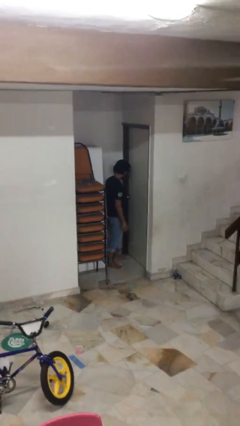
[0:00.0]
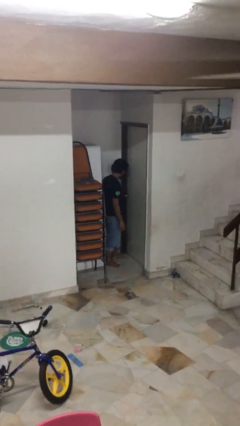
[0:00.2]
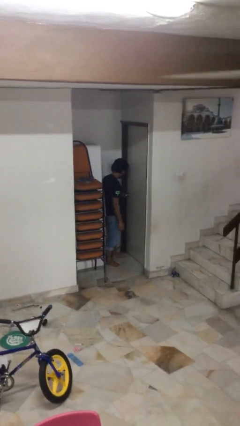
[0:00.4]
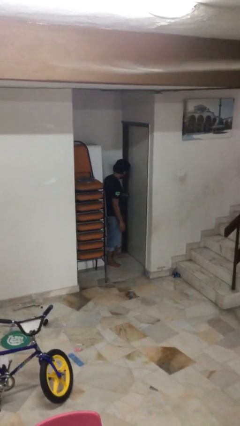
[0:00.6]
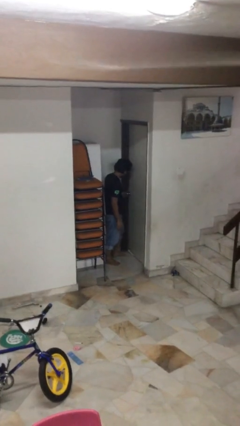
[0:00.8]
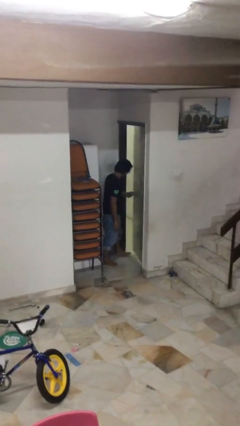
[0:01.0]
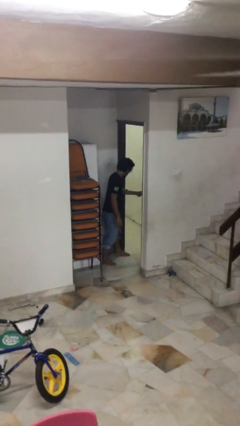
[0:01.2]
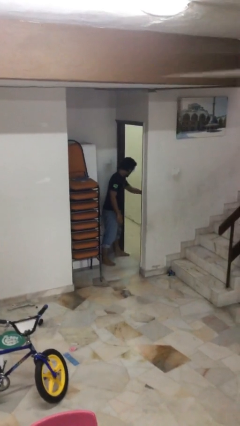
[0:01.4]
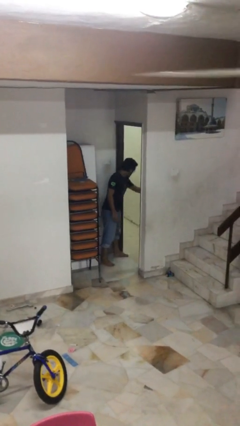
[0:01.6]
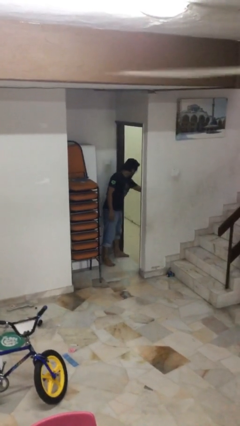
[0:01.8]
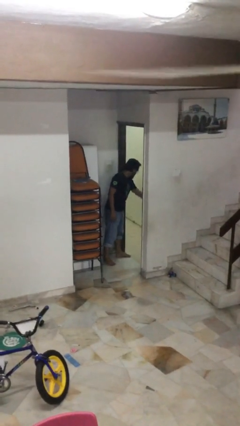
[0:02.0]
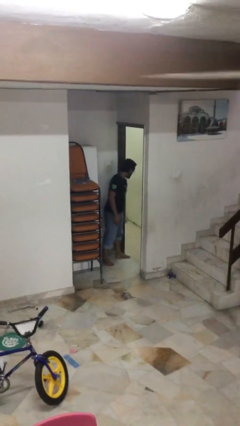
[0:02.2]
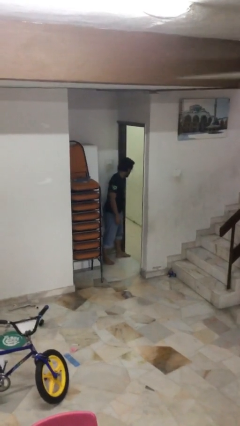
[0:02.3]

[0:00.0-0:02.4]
person opens facility door

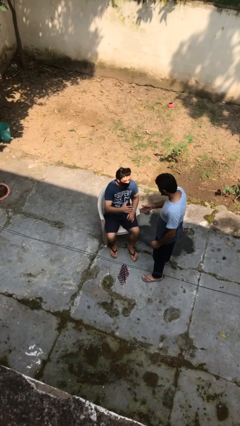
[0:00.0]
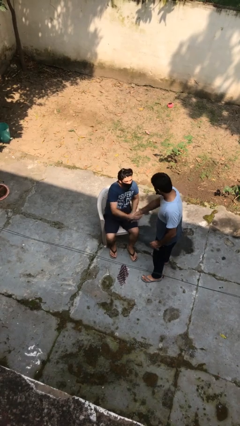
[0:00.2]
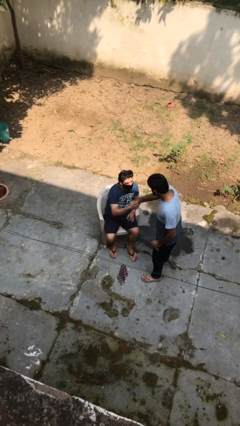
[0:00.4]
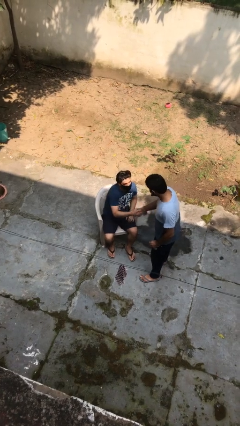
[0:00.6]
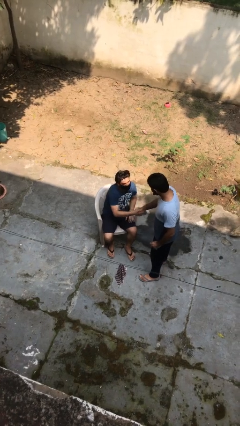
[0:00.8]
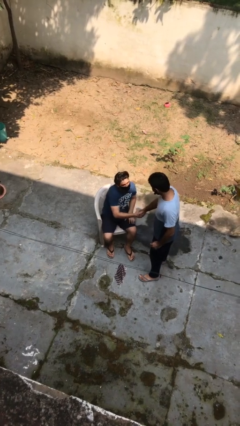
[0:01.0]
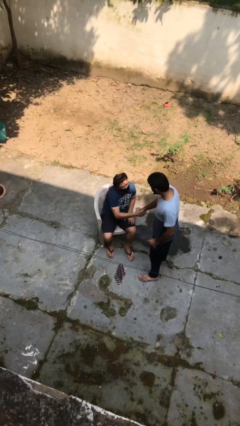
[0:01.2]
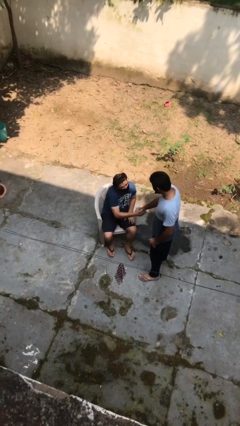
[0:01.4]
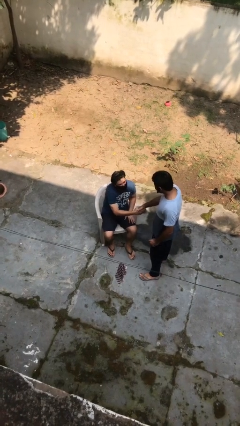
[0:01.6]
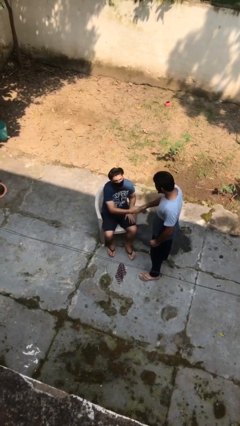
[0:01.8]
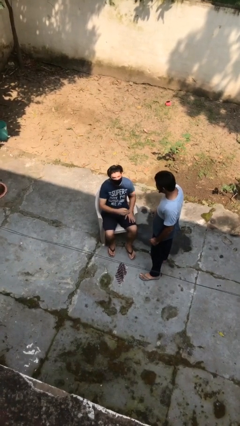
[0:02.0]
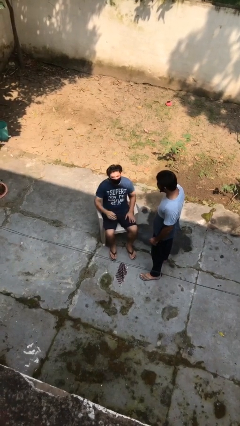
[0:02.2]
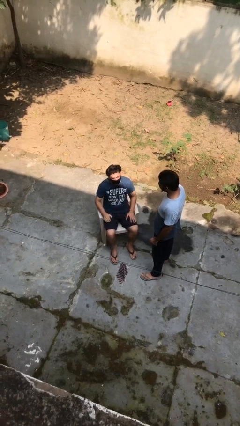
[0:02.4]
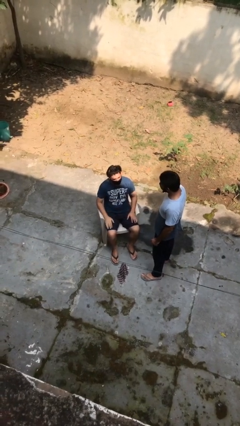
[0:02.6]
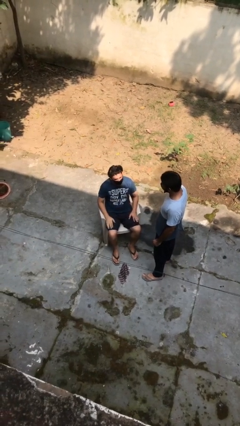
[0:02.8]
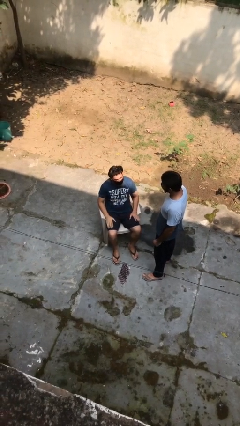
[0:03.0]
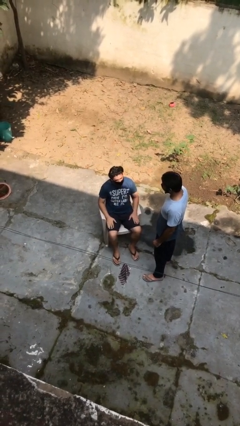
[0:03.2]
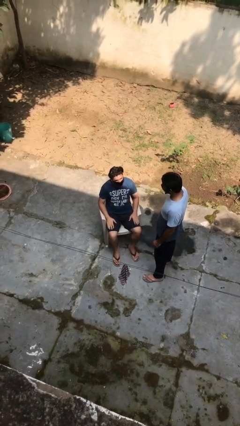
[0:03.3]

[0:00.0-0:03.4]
person shakes hand

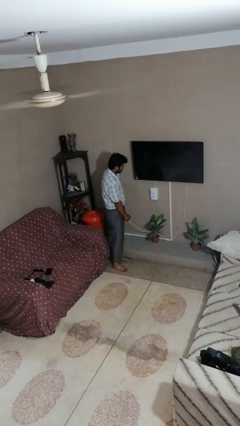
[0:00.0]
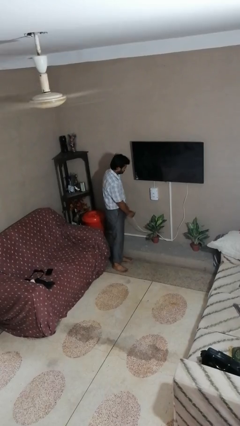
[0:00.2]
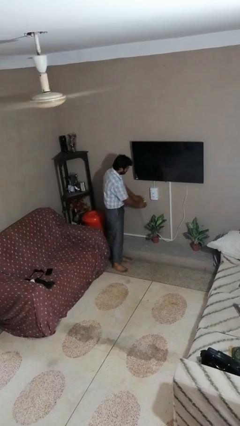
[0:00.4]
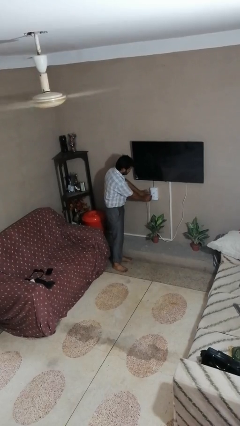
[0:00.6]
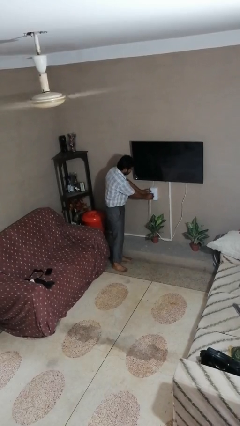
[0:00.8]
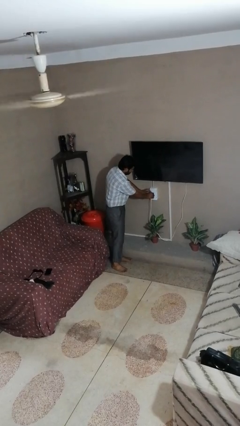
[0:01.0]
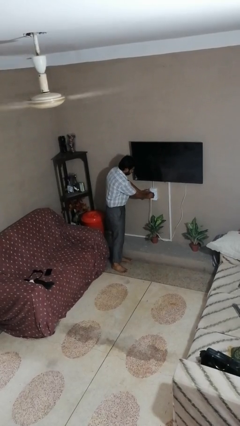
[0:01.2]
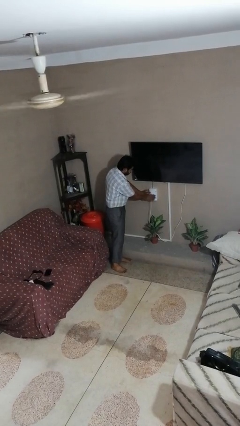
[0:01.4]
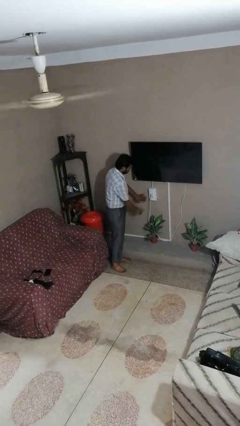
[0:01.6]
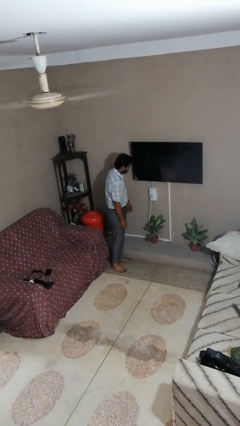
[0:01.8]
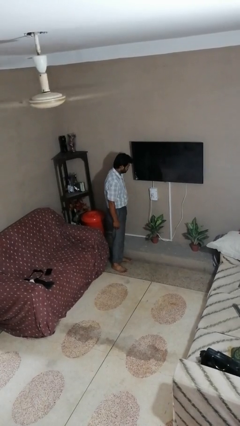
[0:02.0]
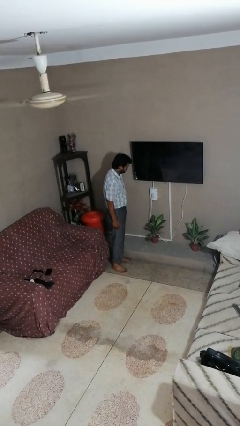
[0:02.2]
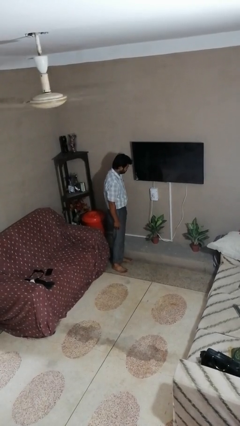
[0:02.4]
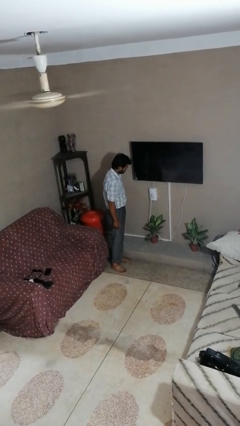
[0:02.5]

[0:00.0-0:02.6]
person plugs into electrical socket

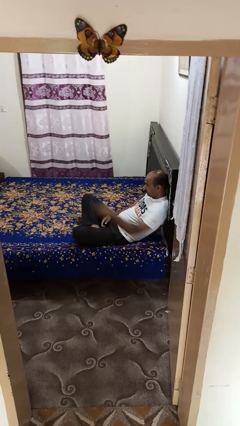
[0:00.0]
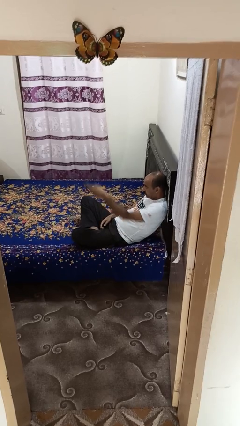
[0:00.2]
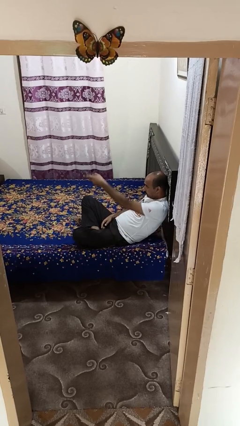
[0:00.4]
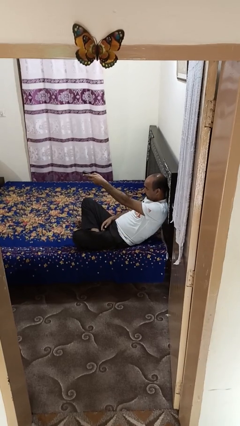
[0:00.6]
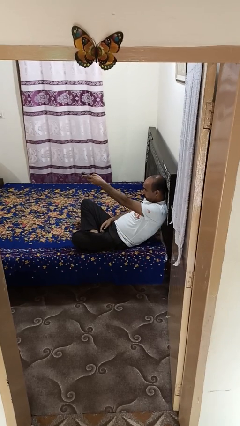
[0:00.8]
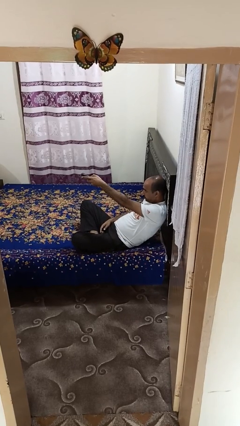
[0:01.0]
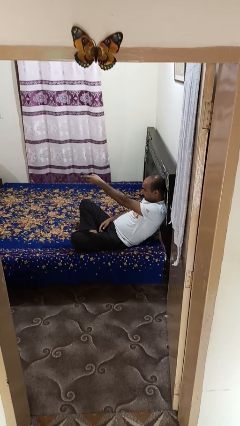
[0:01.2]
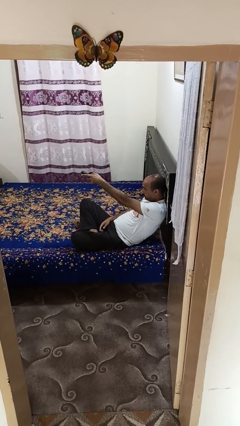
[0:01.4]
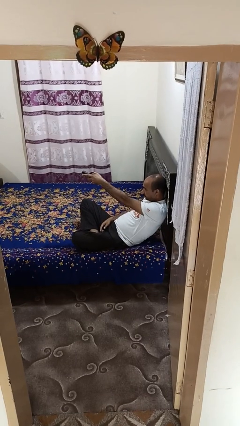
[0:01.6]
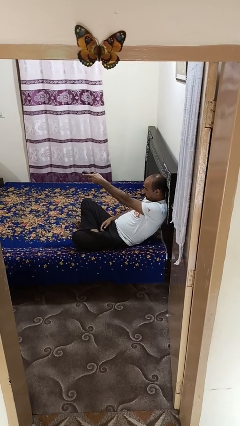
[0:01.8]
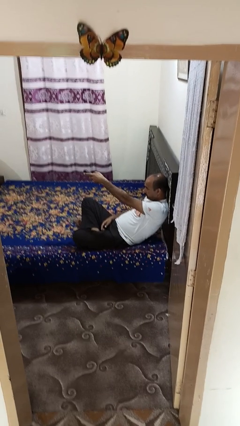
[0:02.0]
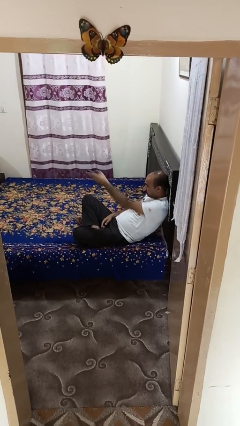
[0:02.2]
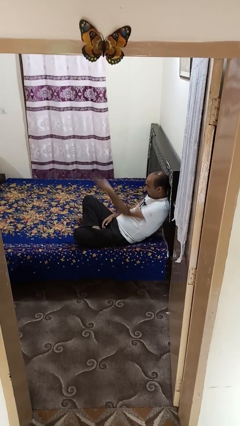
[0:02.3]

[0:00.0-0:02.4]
person uses television remote

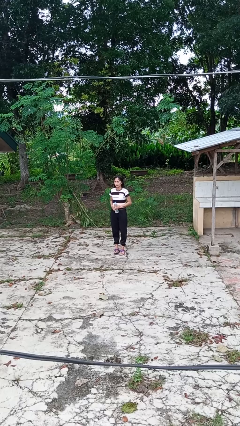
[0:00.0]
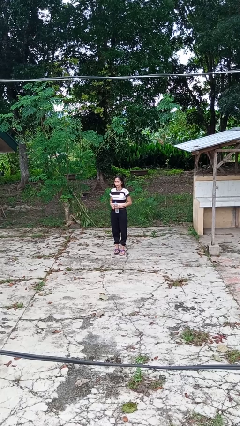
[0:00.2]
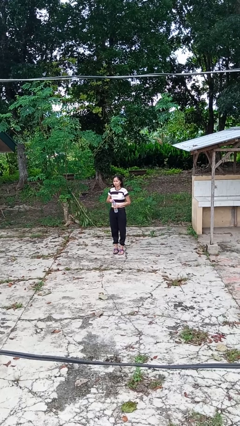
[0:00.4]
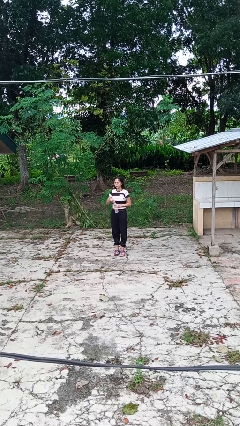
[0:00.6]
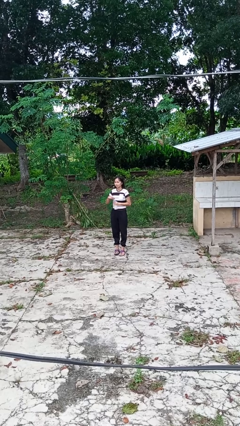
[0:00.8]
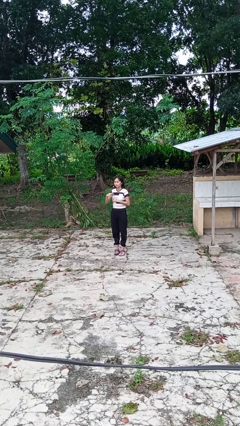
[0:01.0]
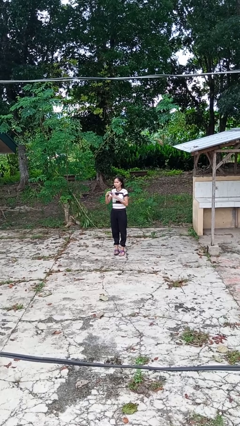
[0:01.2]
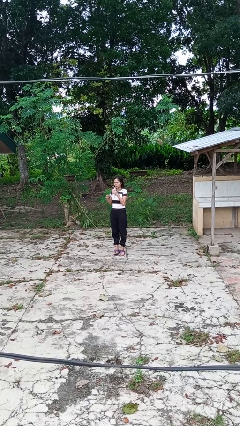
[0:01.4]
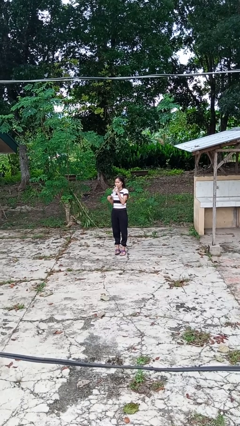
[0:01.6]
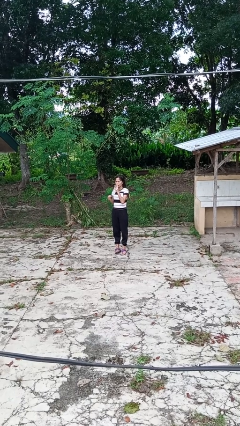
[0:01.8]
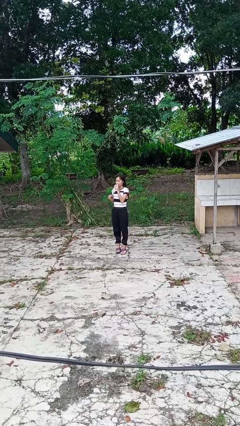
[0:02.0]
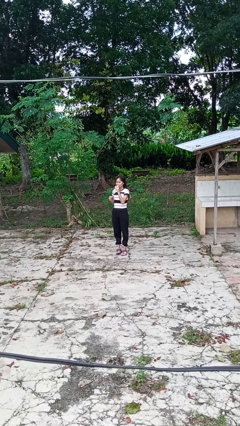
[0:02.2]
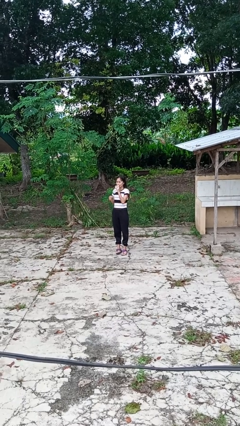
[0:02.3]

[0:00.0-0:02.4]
person drinks from bottle

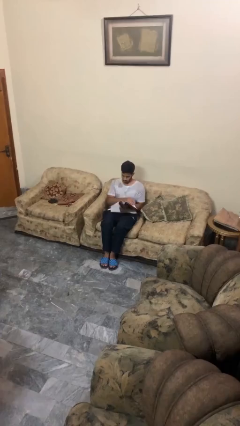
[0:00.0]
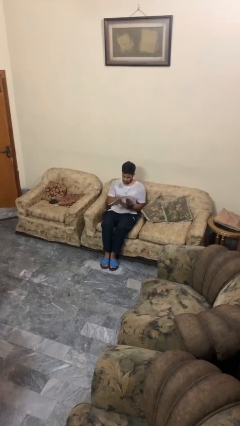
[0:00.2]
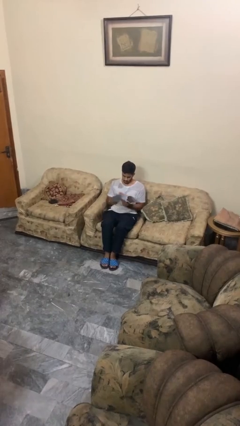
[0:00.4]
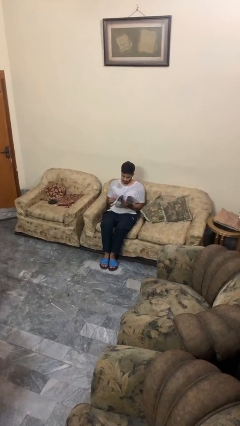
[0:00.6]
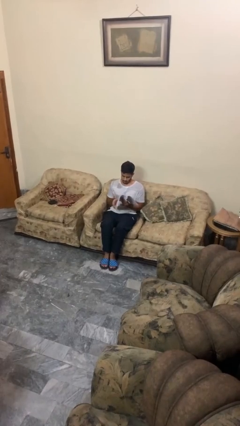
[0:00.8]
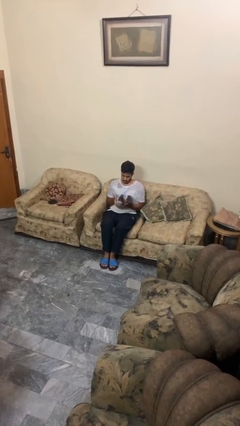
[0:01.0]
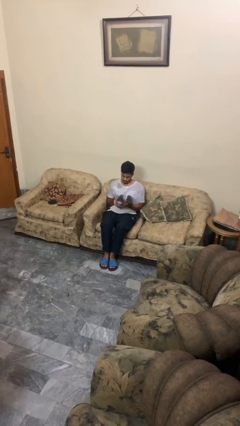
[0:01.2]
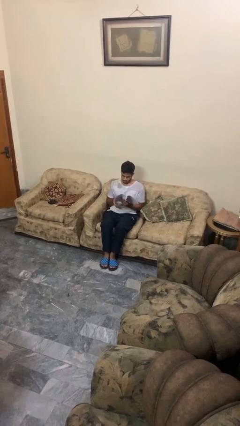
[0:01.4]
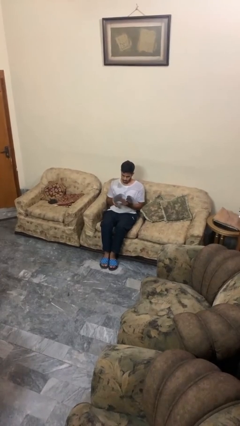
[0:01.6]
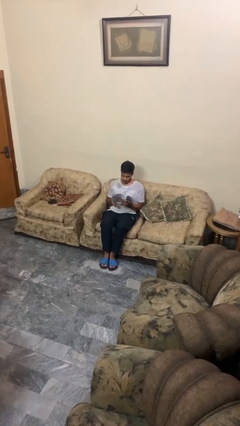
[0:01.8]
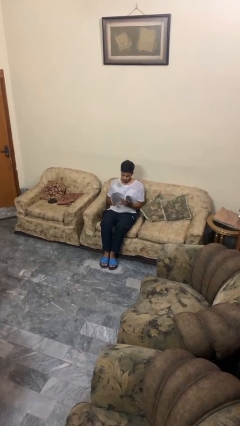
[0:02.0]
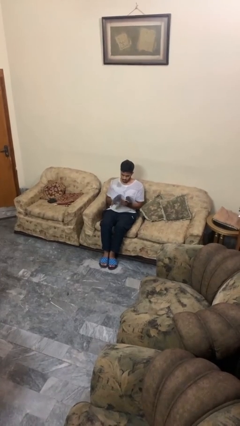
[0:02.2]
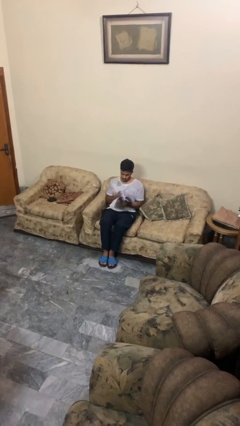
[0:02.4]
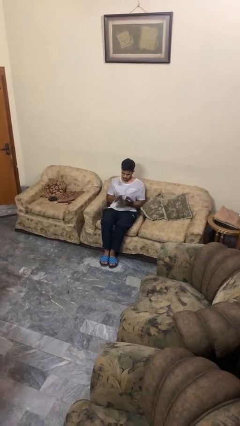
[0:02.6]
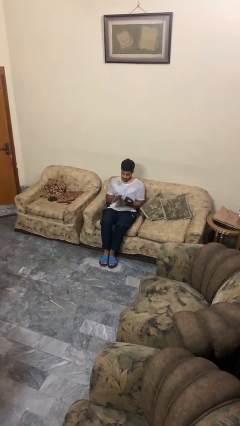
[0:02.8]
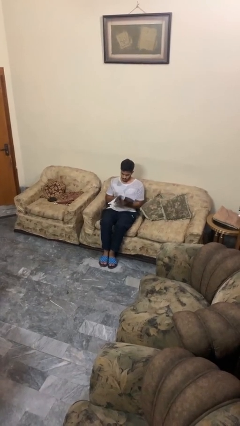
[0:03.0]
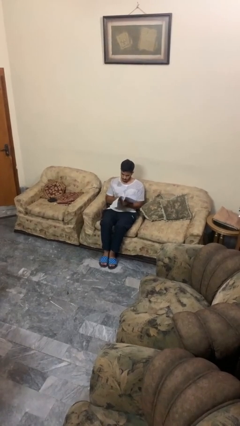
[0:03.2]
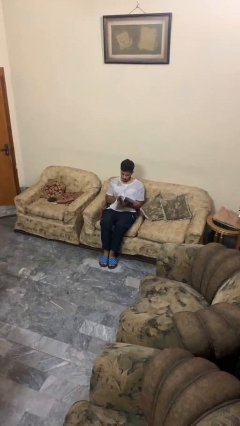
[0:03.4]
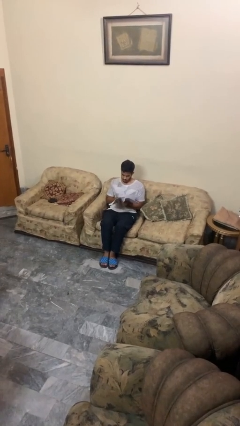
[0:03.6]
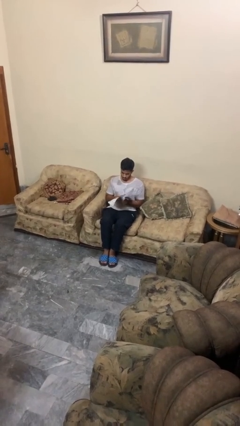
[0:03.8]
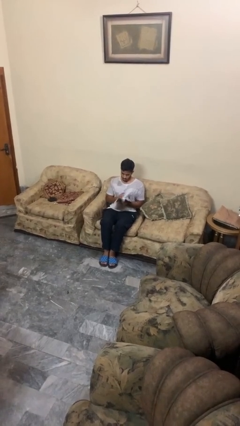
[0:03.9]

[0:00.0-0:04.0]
person reads magazine
